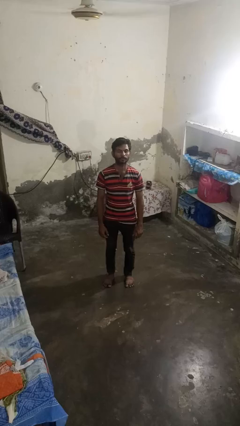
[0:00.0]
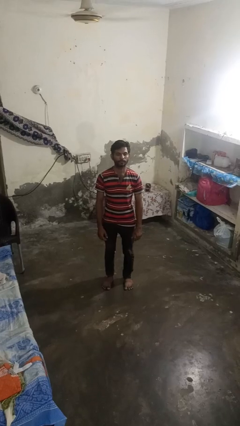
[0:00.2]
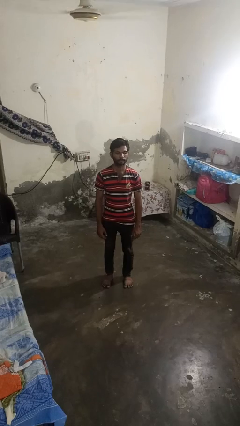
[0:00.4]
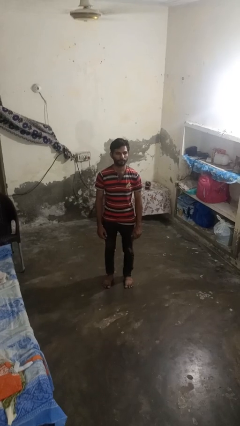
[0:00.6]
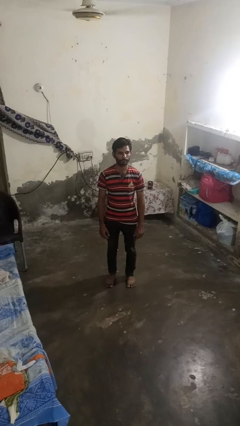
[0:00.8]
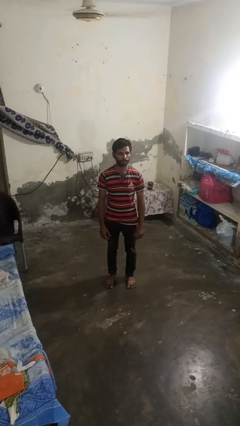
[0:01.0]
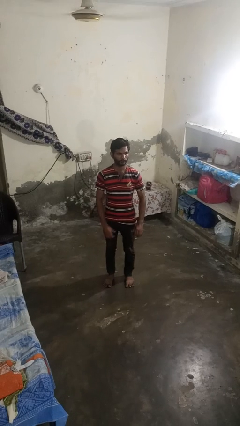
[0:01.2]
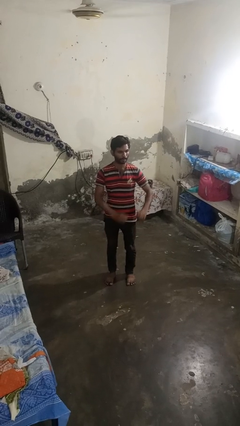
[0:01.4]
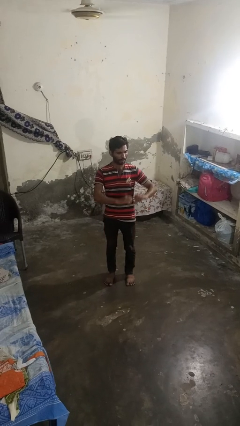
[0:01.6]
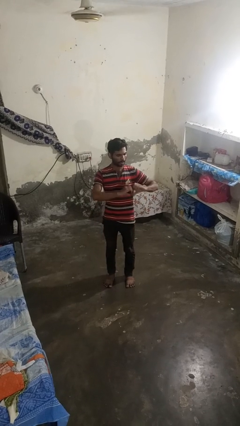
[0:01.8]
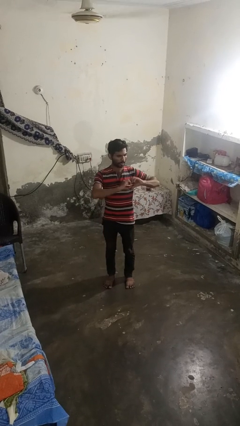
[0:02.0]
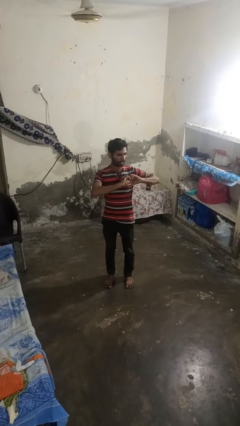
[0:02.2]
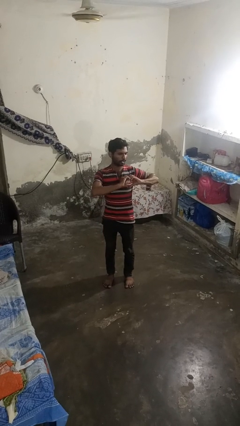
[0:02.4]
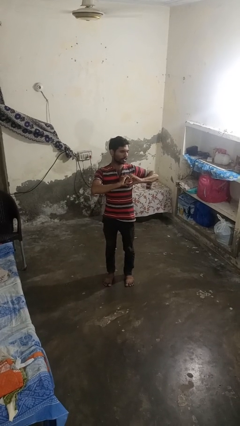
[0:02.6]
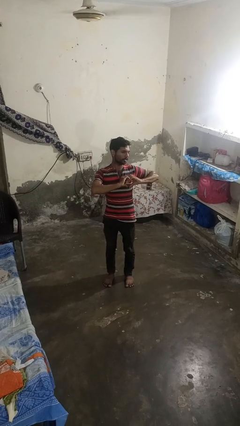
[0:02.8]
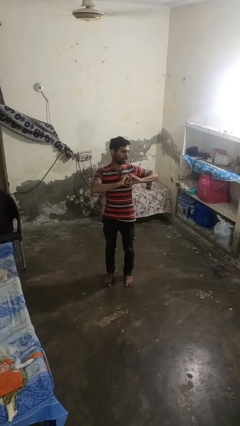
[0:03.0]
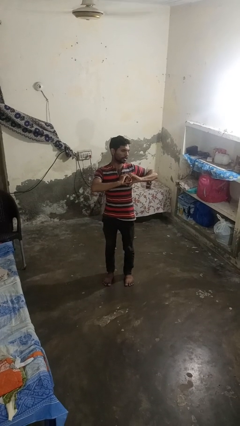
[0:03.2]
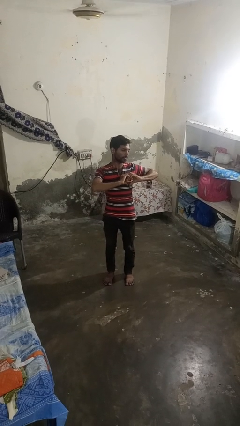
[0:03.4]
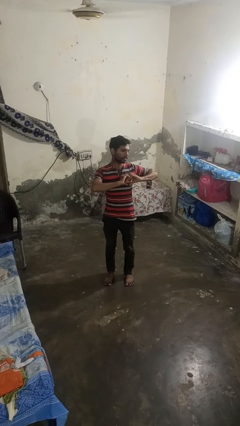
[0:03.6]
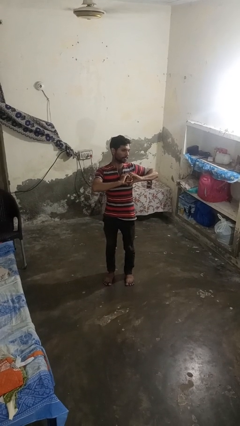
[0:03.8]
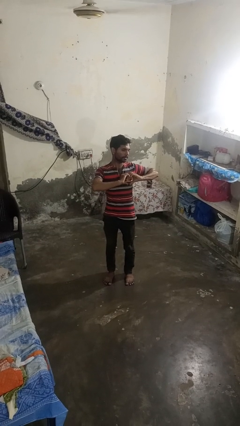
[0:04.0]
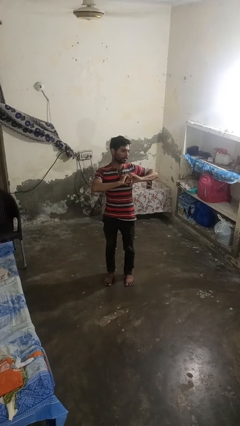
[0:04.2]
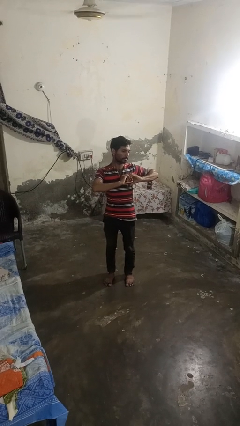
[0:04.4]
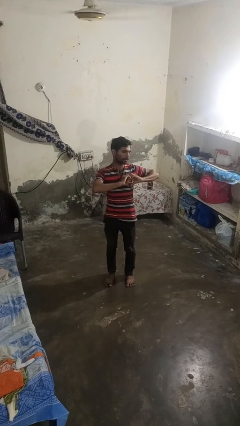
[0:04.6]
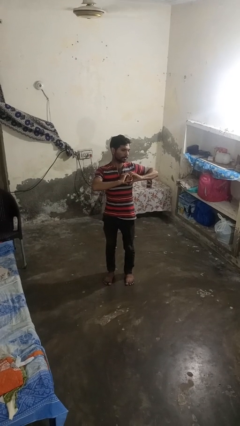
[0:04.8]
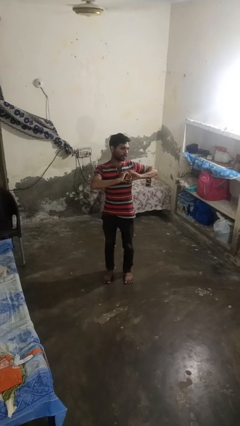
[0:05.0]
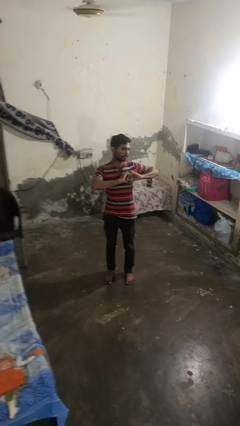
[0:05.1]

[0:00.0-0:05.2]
person gestures heart

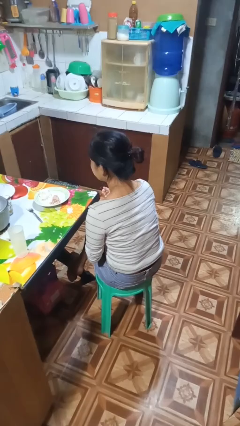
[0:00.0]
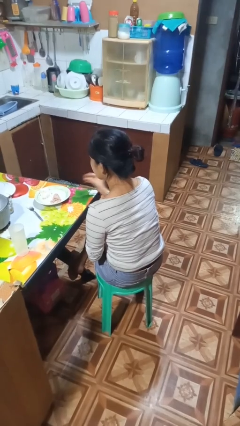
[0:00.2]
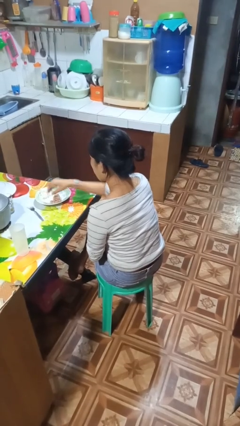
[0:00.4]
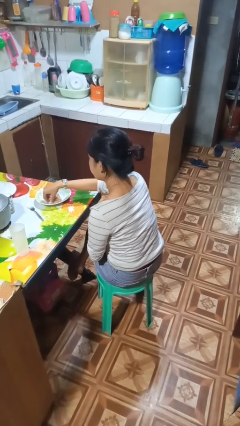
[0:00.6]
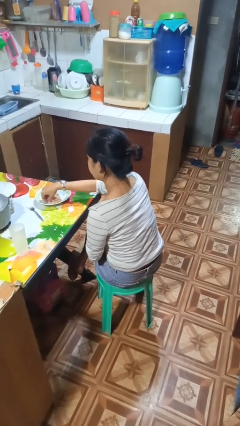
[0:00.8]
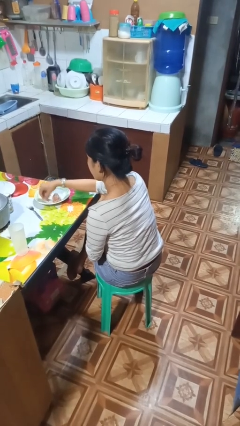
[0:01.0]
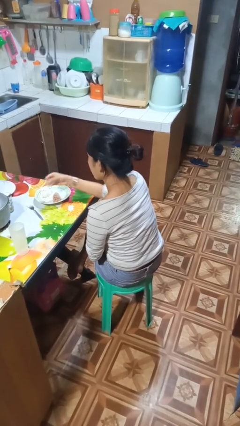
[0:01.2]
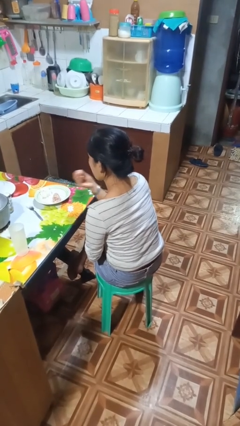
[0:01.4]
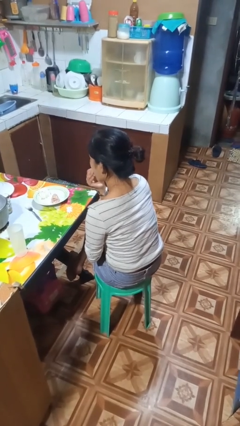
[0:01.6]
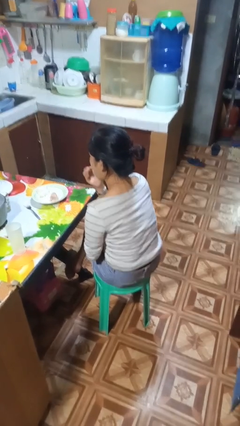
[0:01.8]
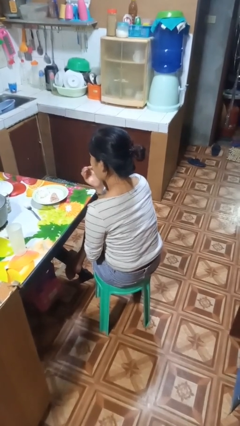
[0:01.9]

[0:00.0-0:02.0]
person eats with hands

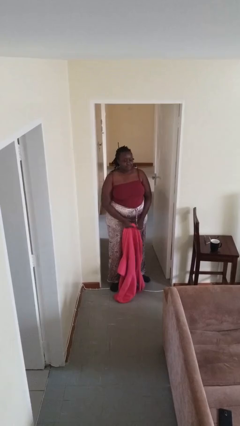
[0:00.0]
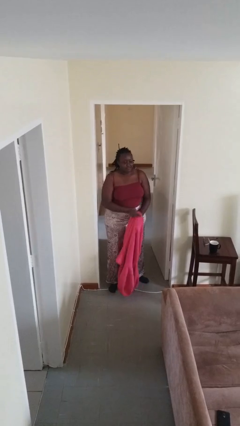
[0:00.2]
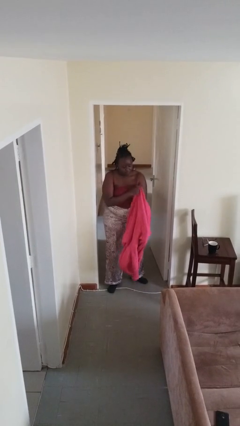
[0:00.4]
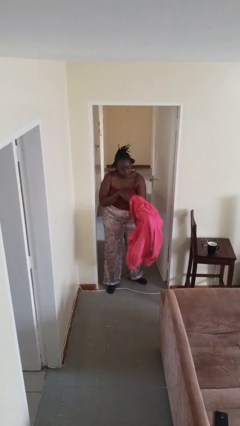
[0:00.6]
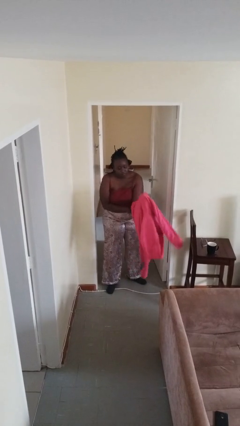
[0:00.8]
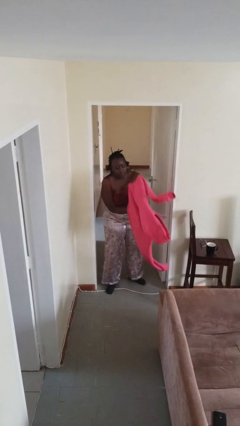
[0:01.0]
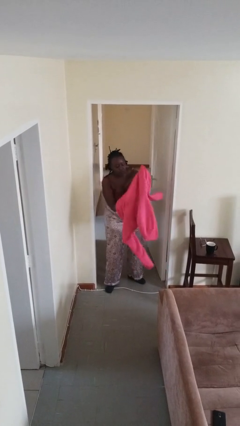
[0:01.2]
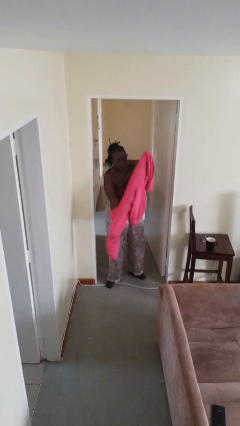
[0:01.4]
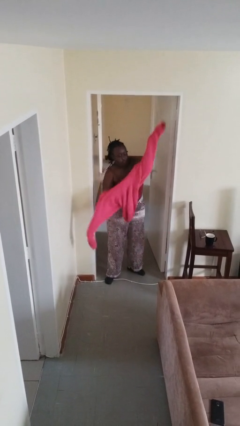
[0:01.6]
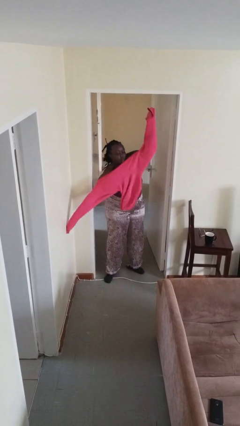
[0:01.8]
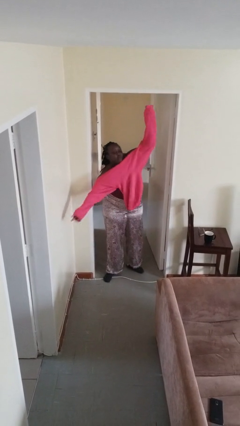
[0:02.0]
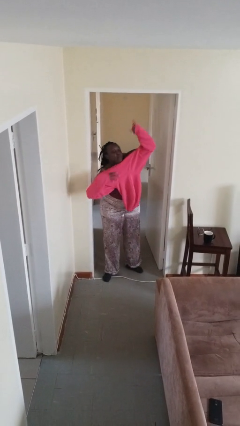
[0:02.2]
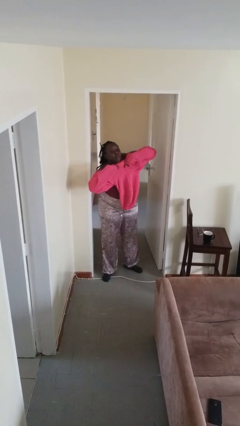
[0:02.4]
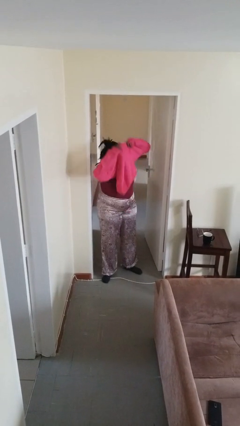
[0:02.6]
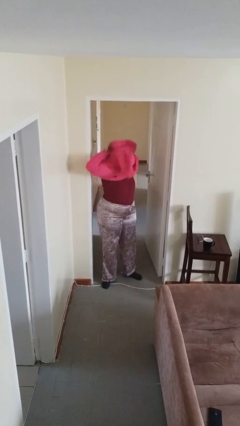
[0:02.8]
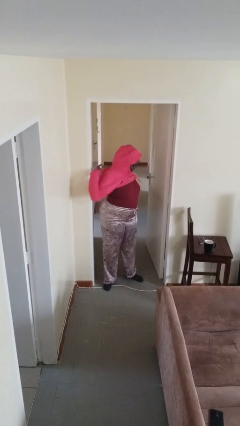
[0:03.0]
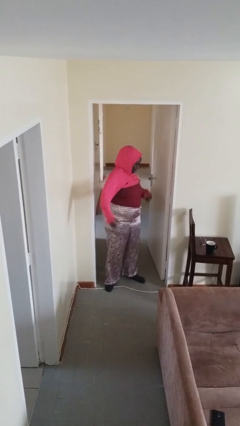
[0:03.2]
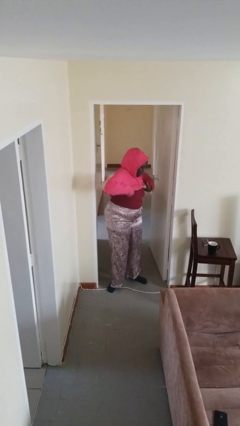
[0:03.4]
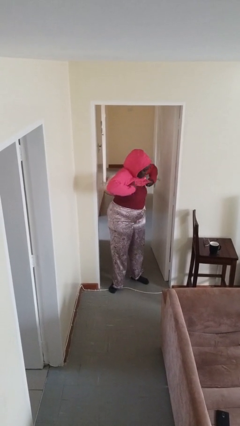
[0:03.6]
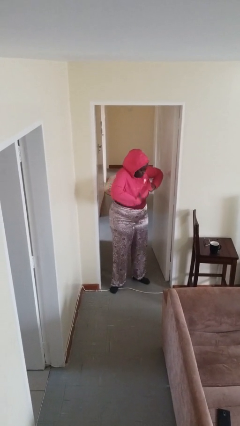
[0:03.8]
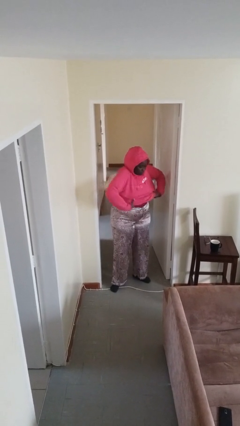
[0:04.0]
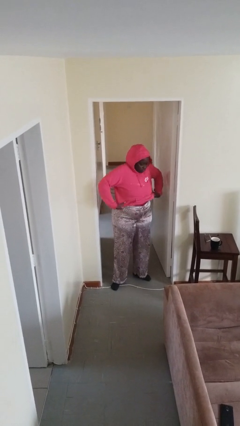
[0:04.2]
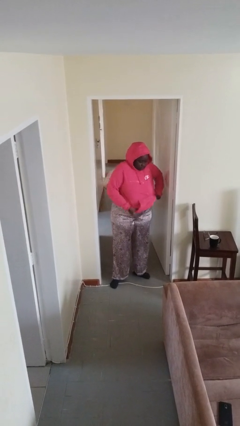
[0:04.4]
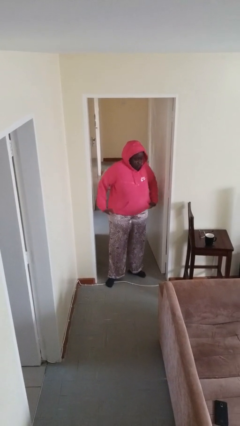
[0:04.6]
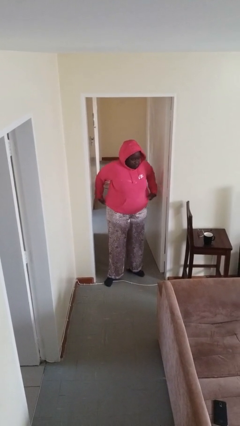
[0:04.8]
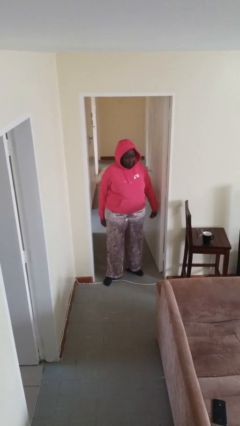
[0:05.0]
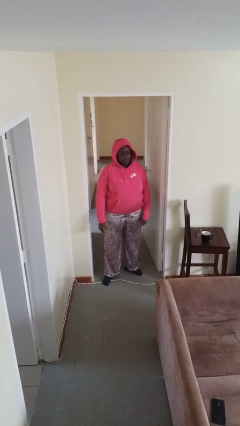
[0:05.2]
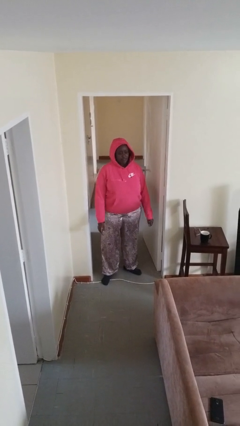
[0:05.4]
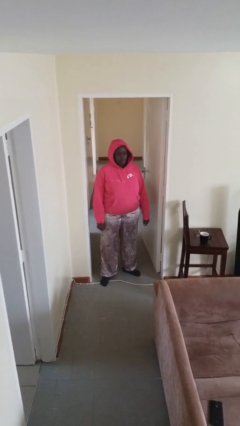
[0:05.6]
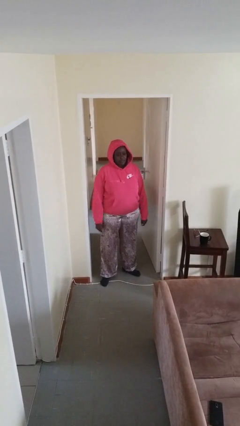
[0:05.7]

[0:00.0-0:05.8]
person puts on hoodie

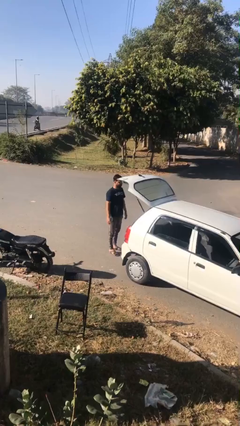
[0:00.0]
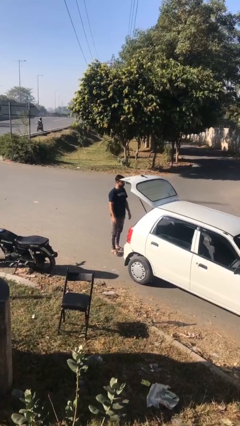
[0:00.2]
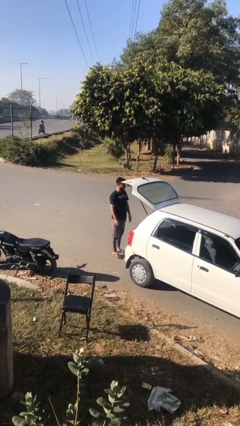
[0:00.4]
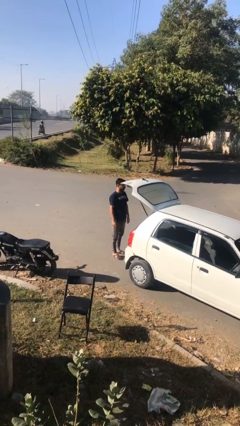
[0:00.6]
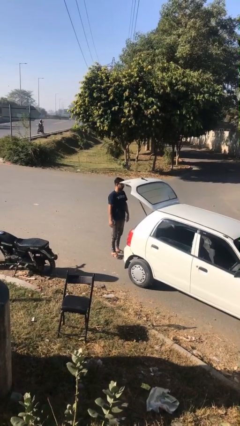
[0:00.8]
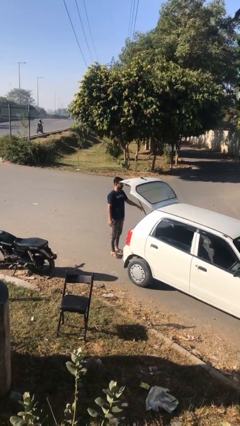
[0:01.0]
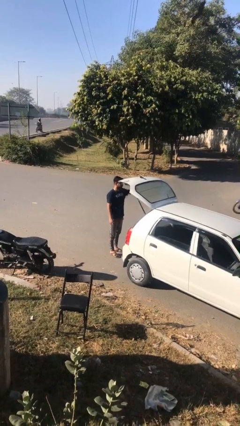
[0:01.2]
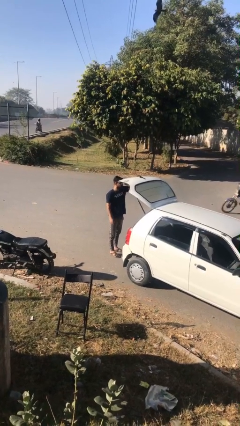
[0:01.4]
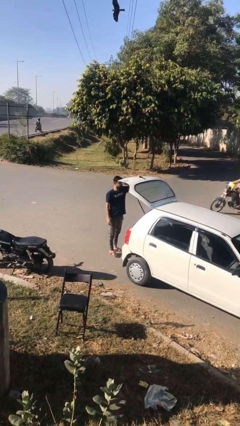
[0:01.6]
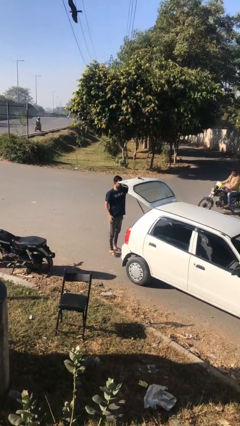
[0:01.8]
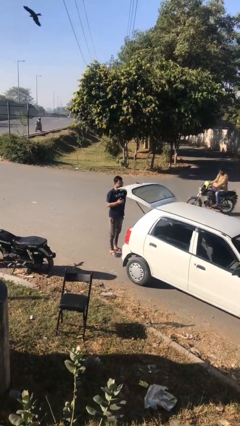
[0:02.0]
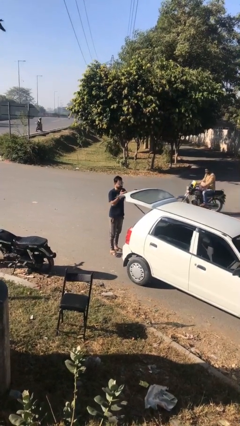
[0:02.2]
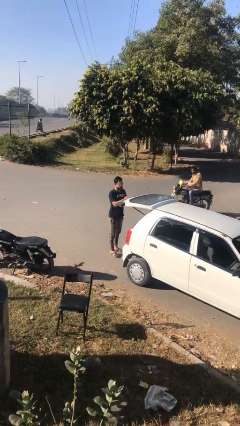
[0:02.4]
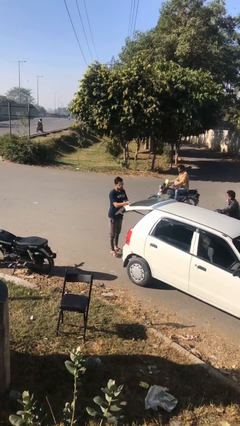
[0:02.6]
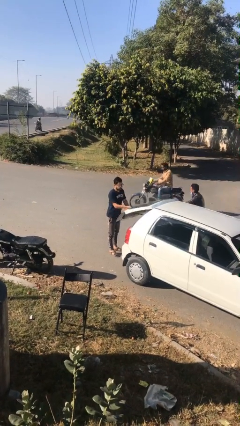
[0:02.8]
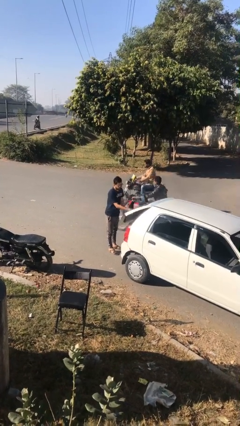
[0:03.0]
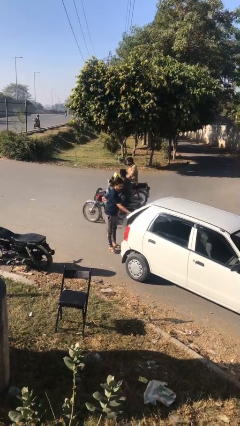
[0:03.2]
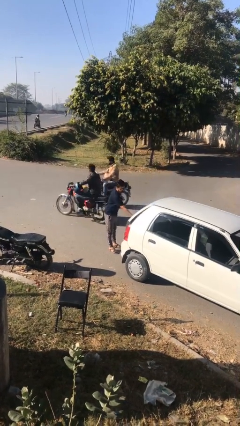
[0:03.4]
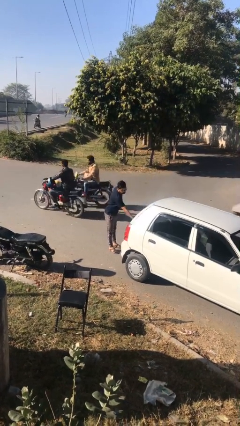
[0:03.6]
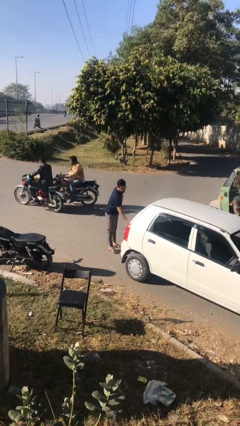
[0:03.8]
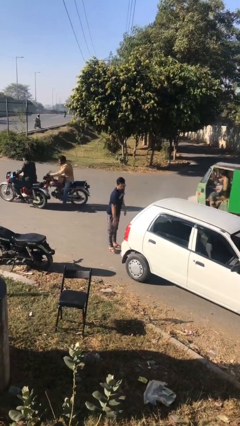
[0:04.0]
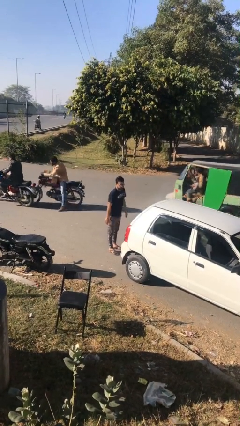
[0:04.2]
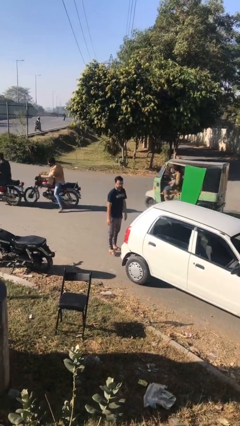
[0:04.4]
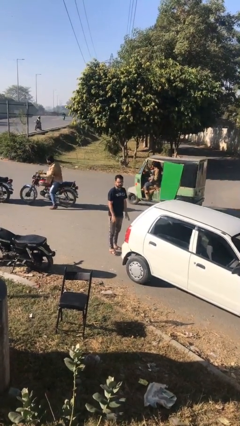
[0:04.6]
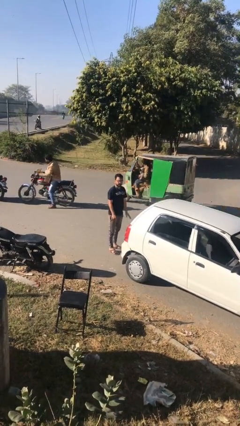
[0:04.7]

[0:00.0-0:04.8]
person closes car trunk
